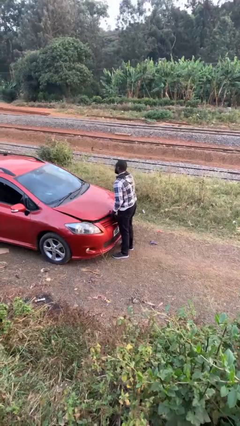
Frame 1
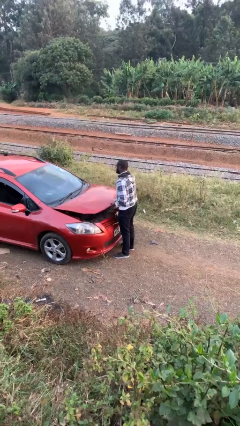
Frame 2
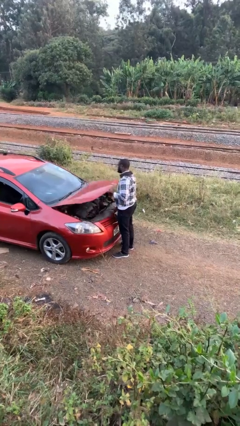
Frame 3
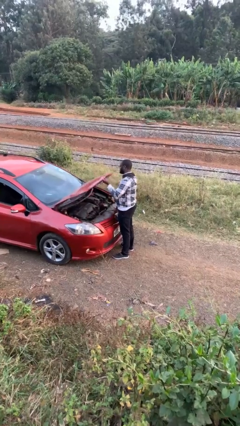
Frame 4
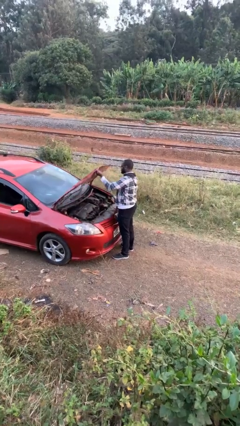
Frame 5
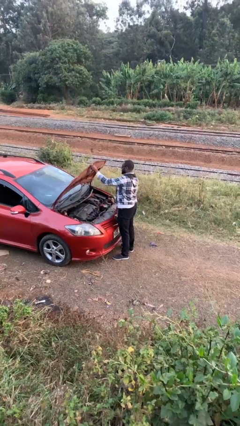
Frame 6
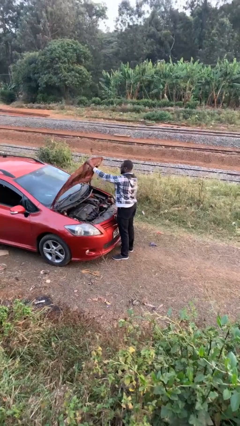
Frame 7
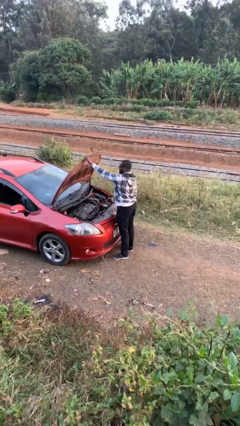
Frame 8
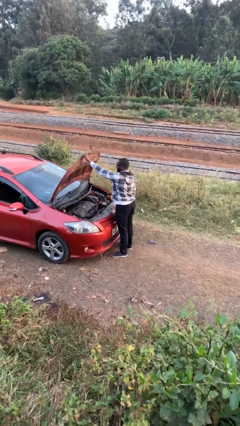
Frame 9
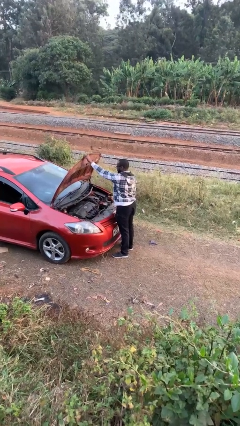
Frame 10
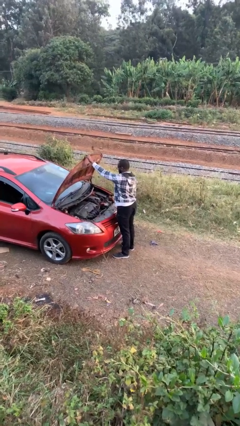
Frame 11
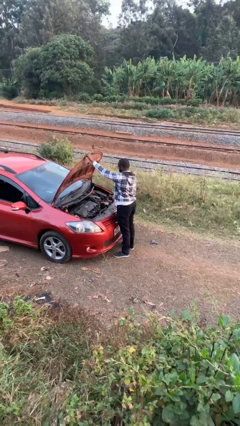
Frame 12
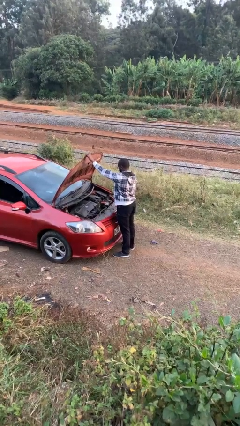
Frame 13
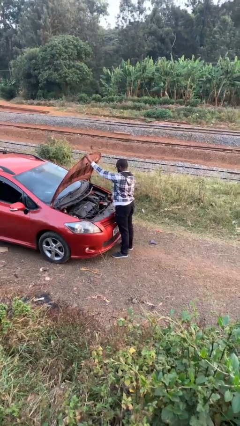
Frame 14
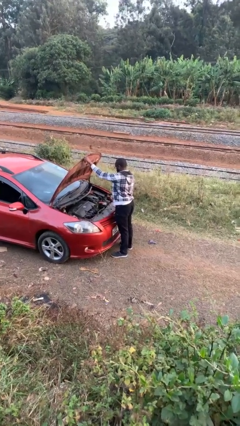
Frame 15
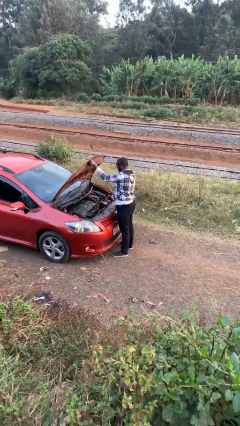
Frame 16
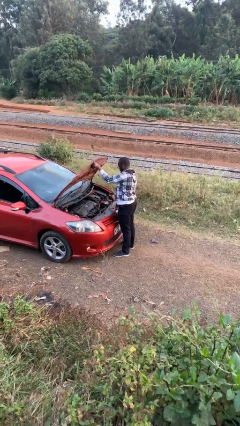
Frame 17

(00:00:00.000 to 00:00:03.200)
person opens car hood

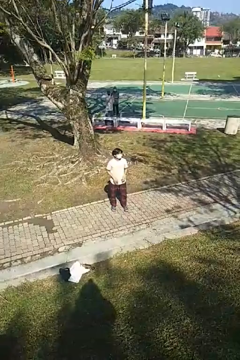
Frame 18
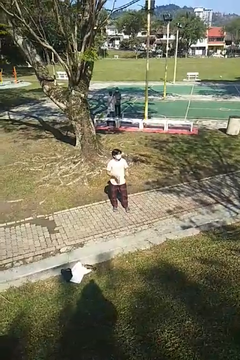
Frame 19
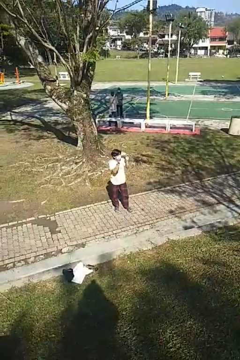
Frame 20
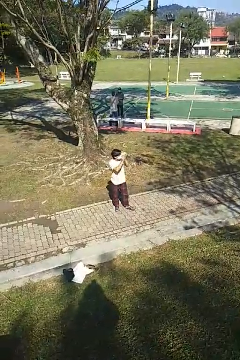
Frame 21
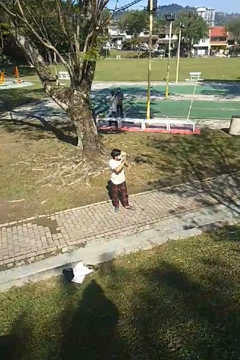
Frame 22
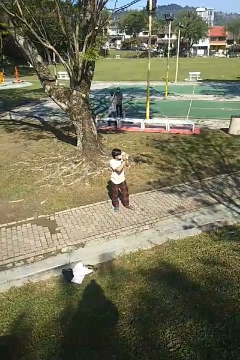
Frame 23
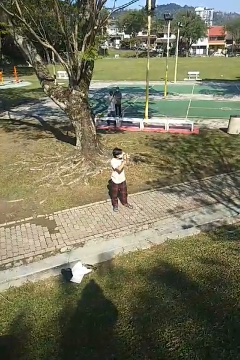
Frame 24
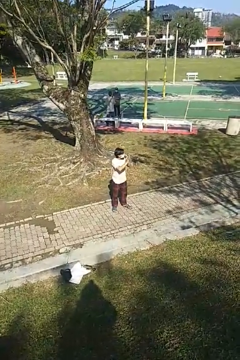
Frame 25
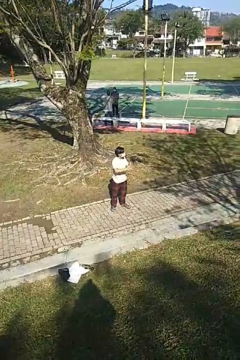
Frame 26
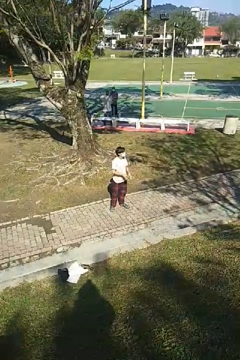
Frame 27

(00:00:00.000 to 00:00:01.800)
person claps hands

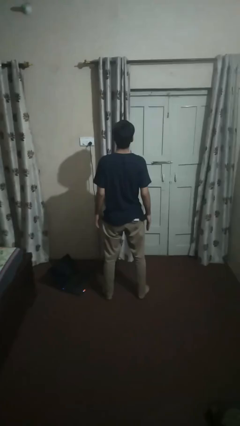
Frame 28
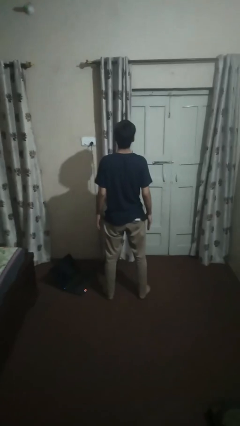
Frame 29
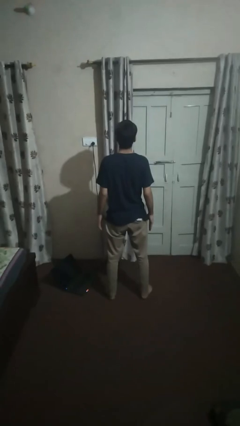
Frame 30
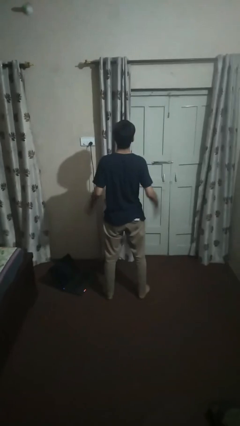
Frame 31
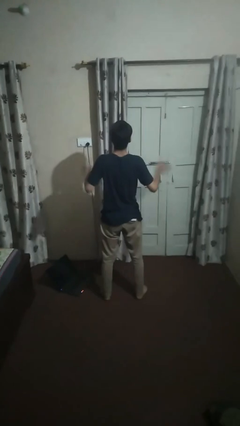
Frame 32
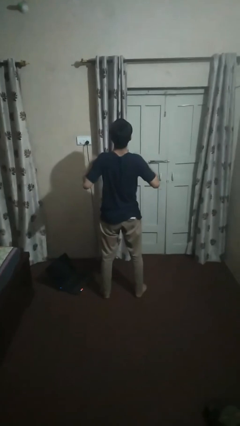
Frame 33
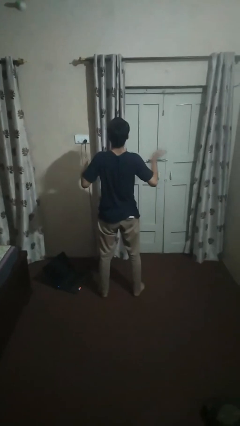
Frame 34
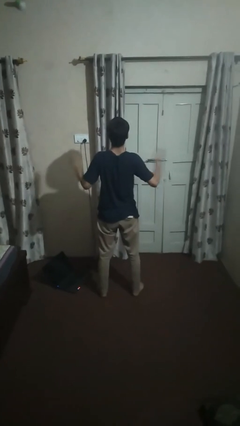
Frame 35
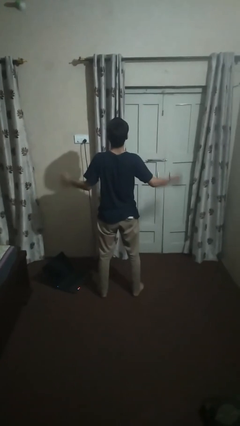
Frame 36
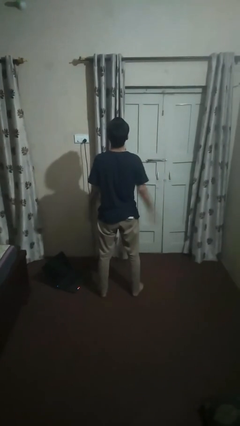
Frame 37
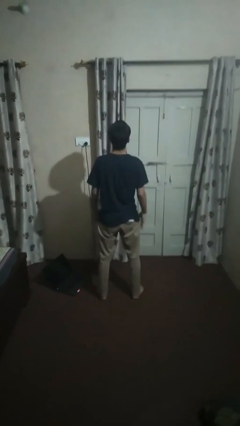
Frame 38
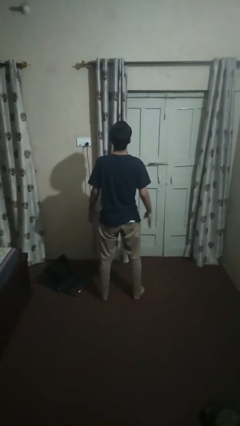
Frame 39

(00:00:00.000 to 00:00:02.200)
person drums on chest

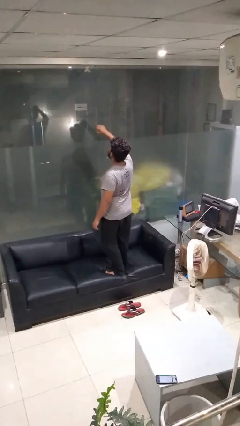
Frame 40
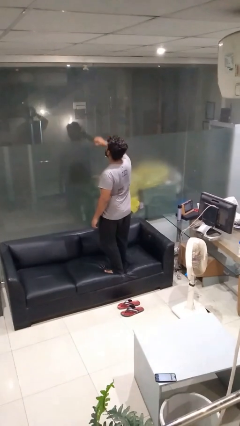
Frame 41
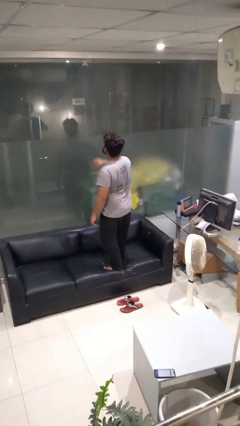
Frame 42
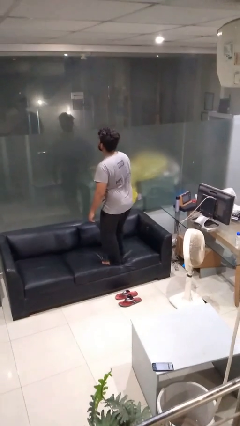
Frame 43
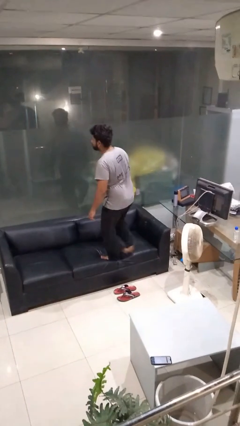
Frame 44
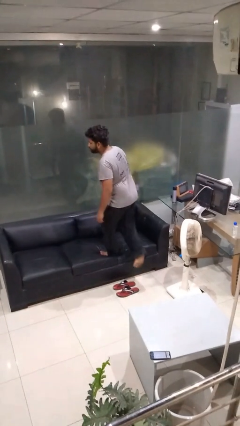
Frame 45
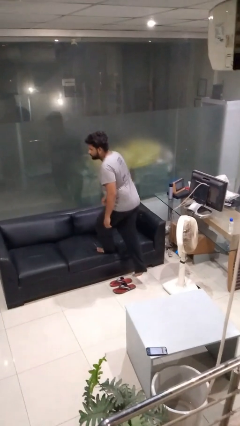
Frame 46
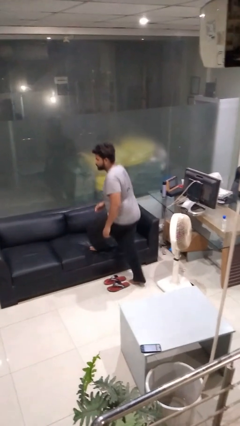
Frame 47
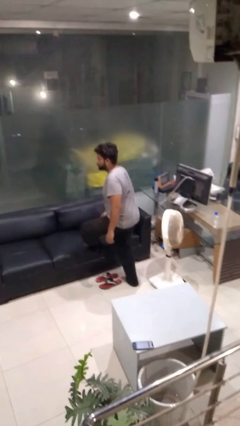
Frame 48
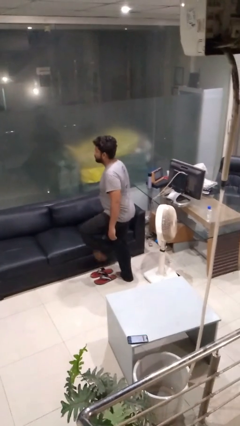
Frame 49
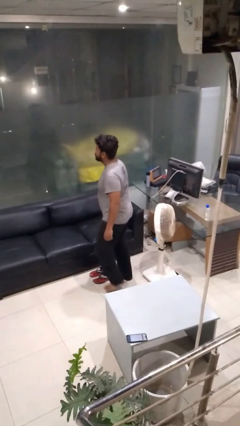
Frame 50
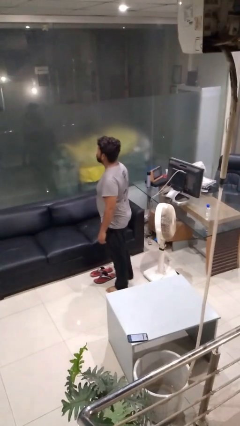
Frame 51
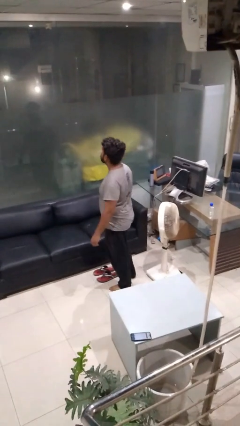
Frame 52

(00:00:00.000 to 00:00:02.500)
person climbs off couch

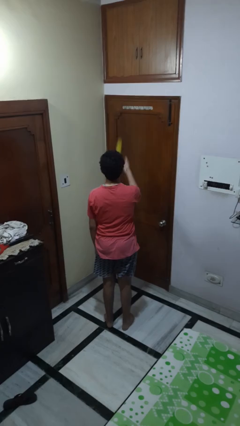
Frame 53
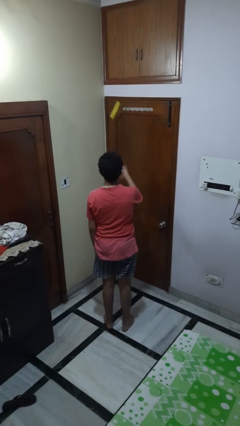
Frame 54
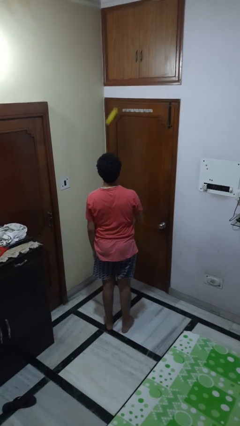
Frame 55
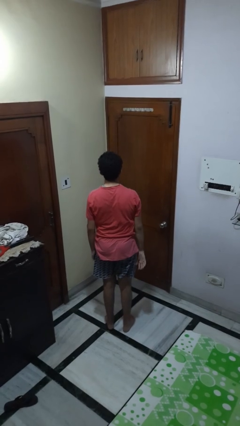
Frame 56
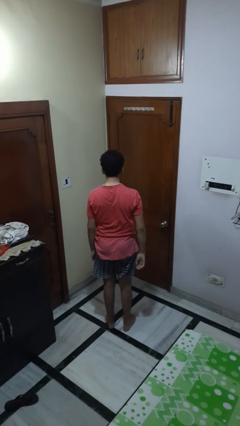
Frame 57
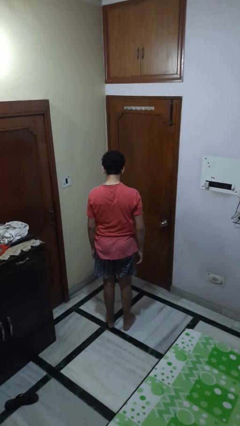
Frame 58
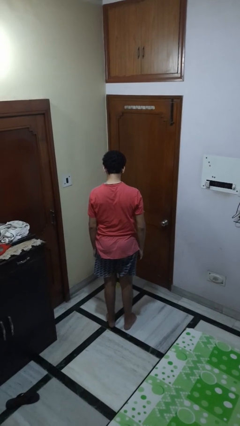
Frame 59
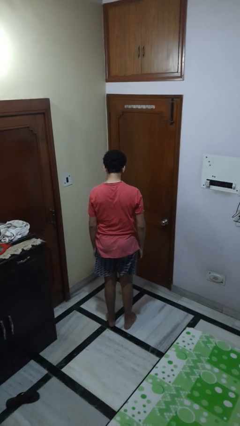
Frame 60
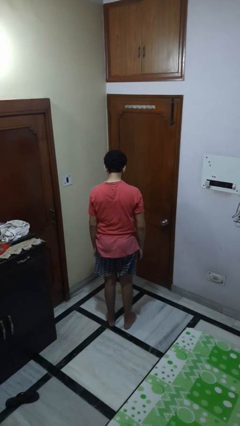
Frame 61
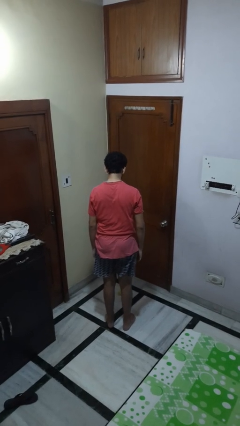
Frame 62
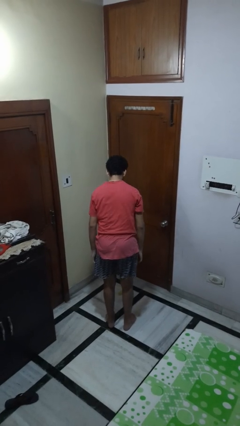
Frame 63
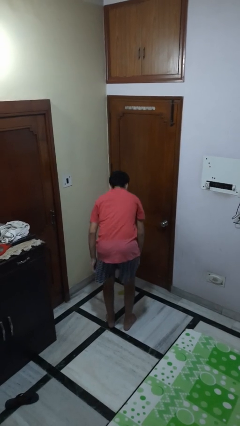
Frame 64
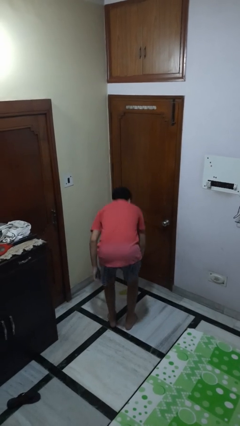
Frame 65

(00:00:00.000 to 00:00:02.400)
person throws object into air

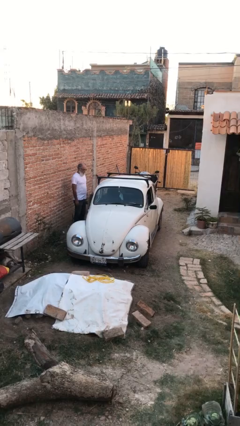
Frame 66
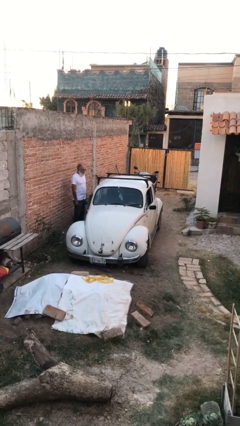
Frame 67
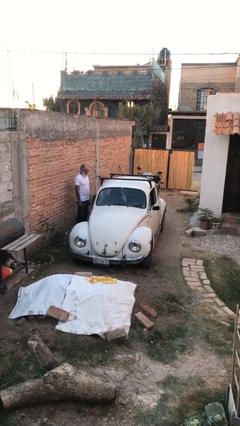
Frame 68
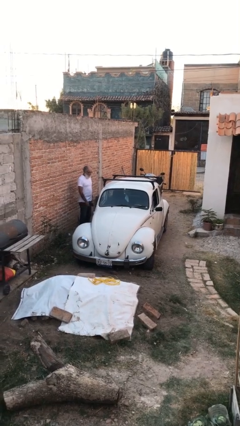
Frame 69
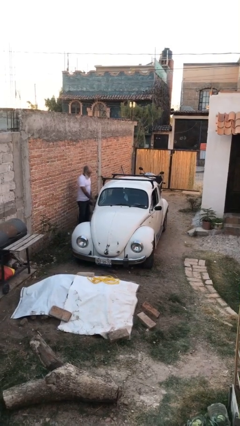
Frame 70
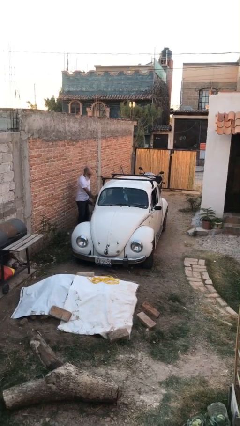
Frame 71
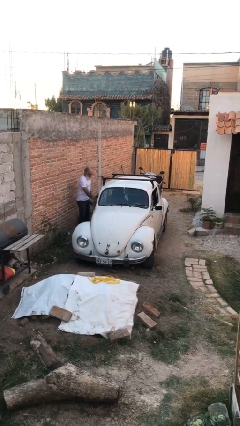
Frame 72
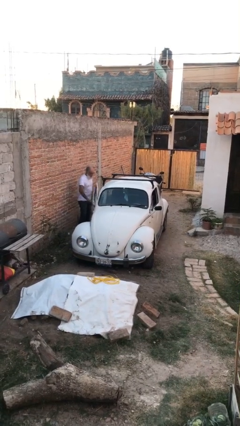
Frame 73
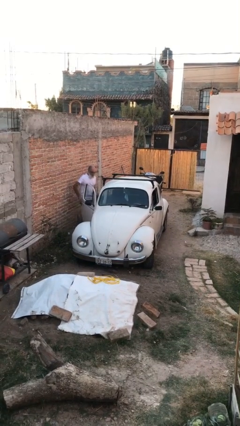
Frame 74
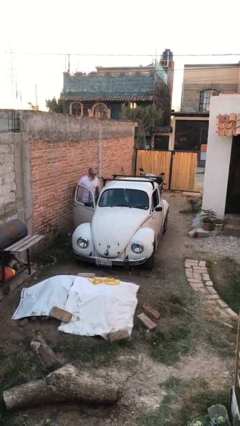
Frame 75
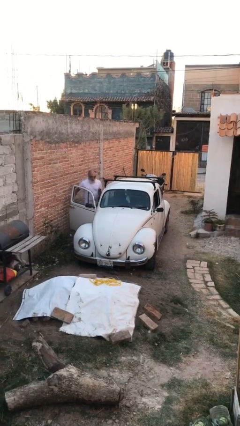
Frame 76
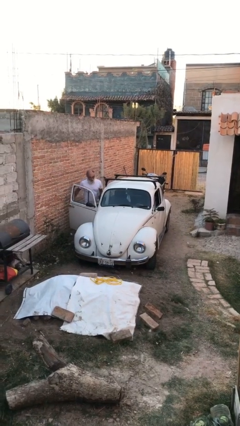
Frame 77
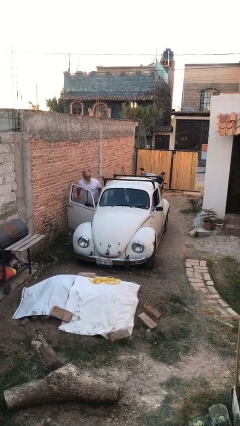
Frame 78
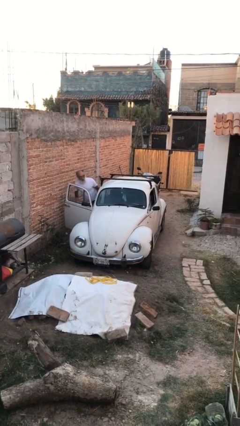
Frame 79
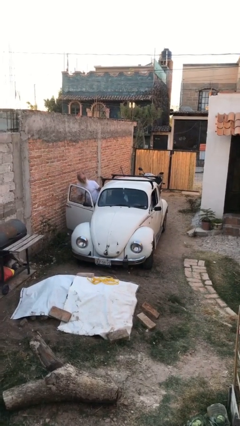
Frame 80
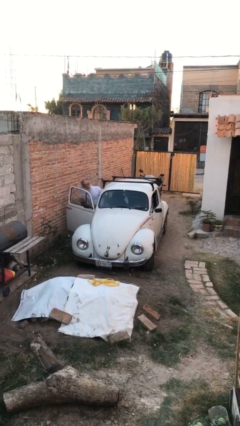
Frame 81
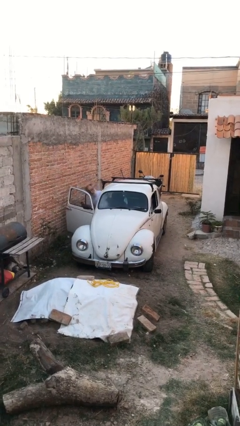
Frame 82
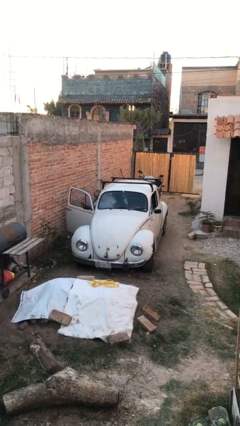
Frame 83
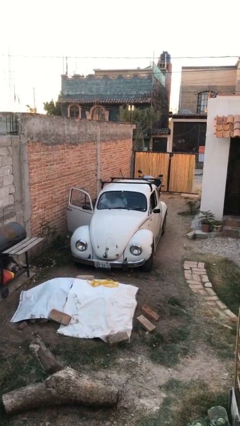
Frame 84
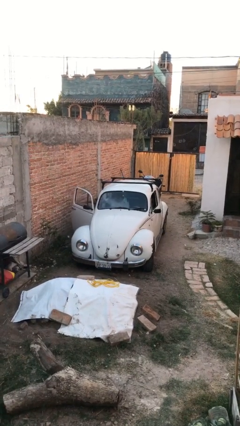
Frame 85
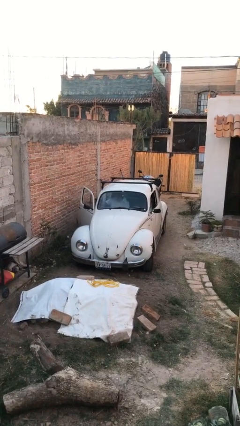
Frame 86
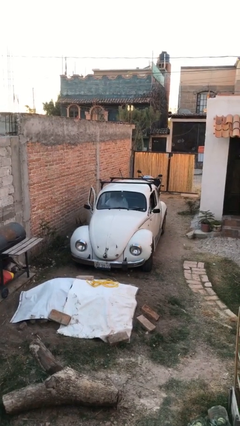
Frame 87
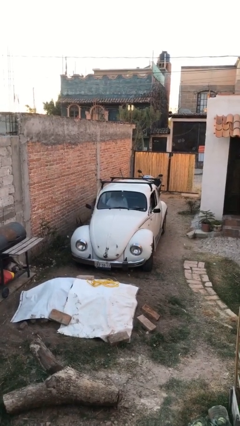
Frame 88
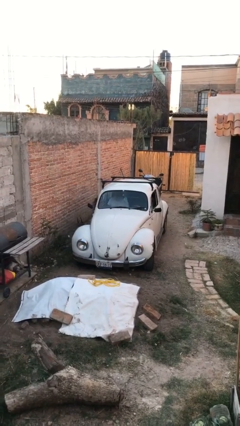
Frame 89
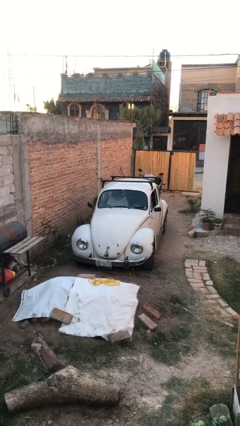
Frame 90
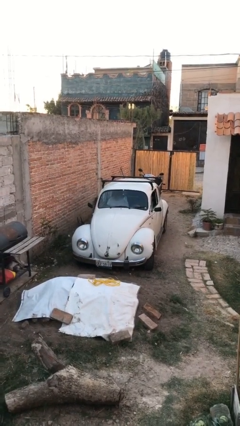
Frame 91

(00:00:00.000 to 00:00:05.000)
car picks up person

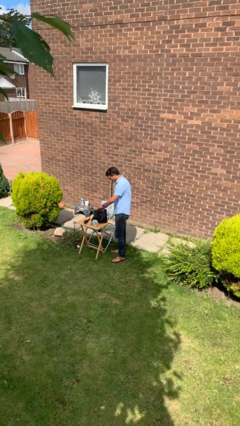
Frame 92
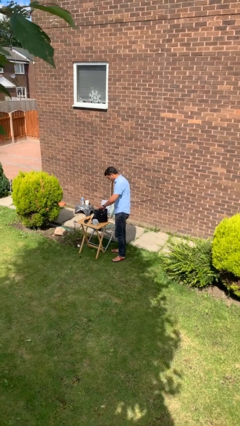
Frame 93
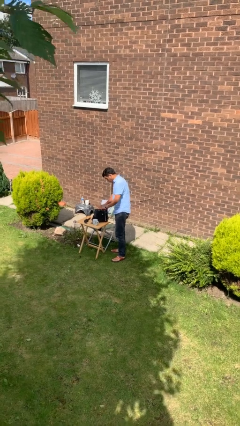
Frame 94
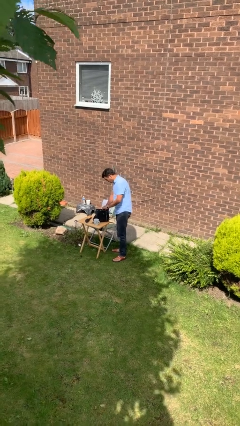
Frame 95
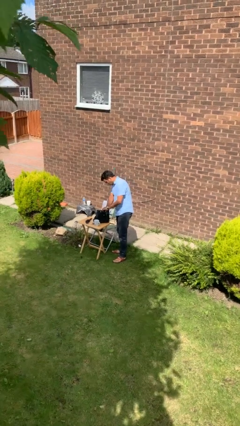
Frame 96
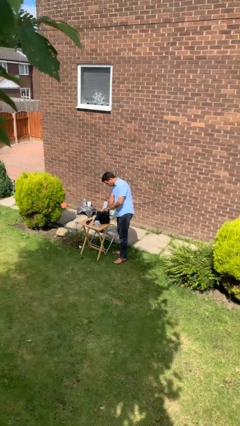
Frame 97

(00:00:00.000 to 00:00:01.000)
person searches in backpack
